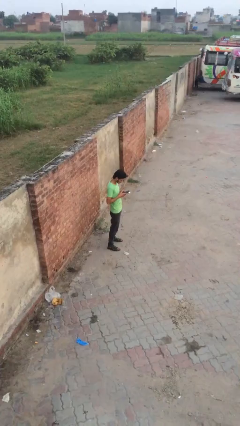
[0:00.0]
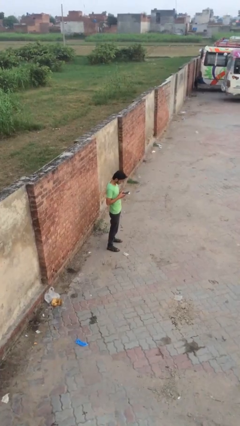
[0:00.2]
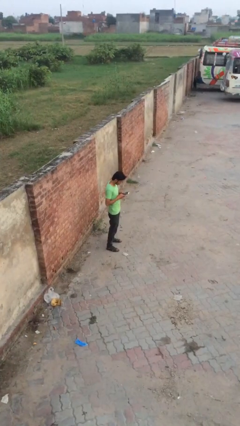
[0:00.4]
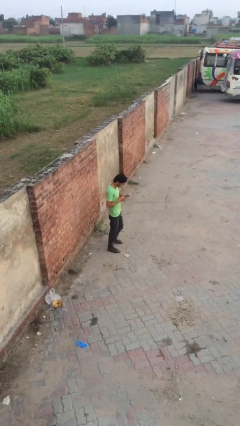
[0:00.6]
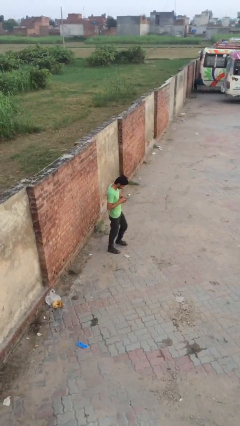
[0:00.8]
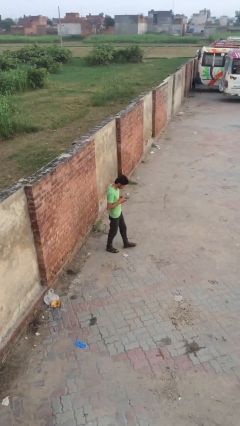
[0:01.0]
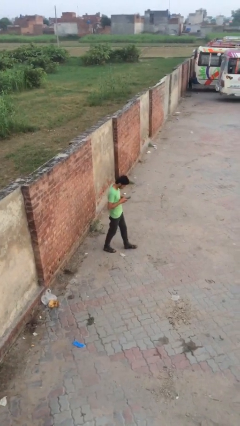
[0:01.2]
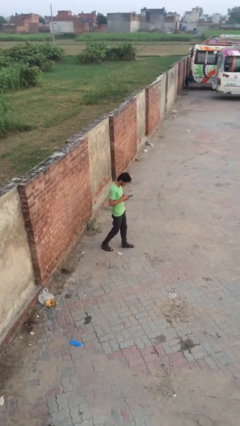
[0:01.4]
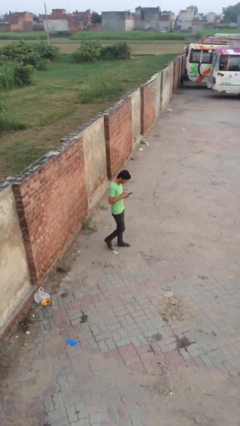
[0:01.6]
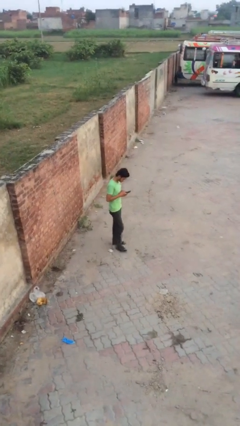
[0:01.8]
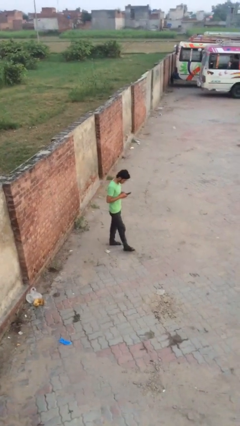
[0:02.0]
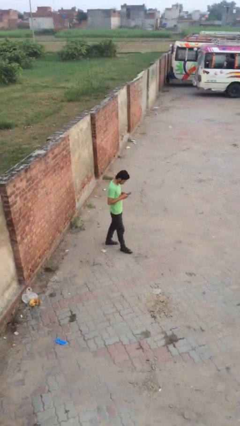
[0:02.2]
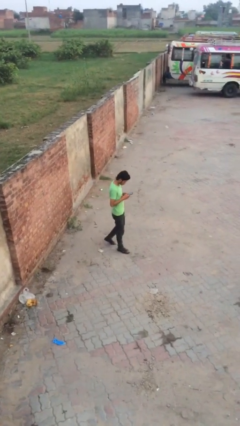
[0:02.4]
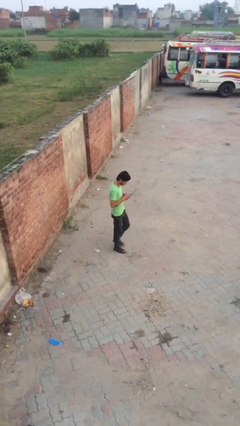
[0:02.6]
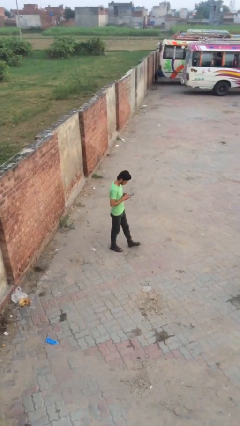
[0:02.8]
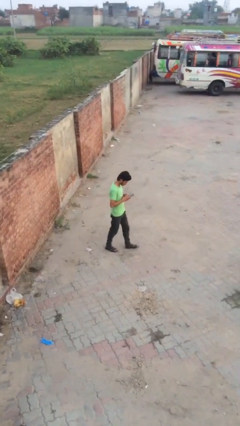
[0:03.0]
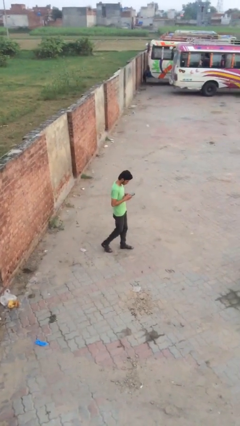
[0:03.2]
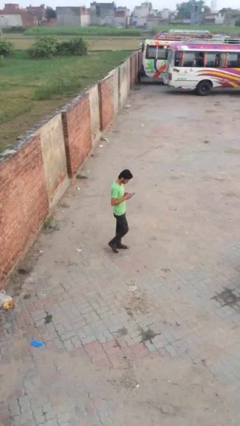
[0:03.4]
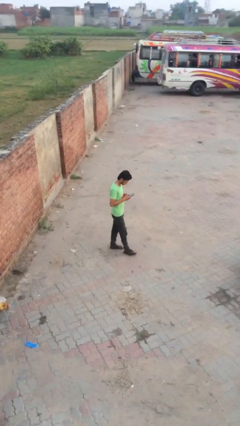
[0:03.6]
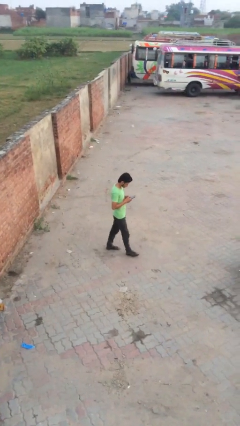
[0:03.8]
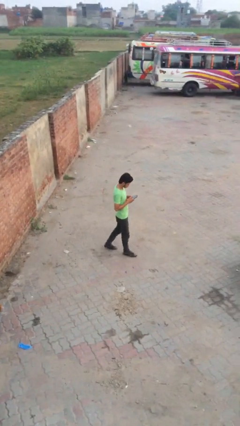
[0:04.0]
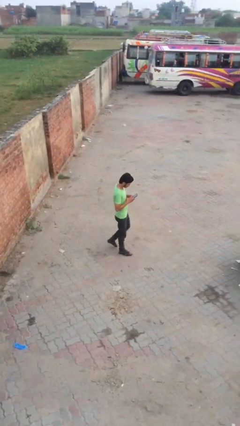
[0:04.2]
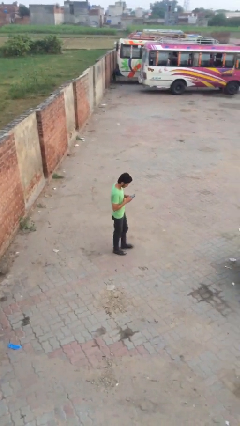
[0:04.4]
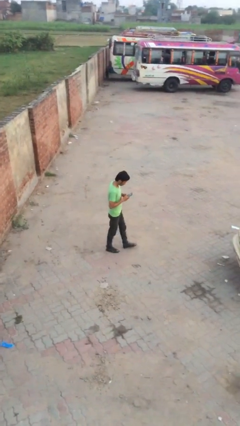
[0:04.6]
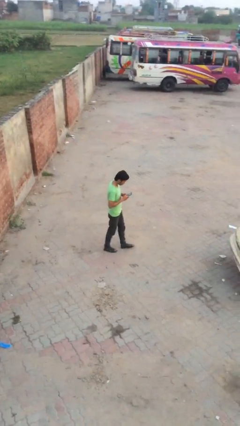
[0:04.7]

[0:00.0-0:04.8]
person texts on phone

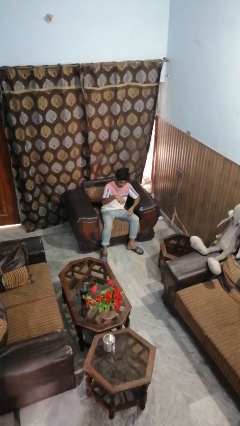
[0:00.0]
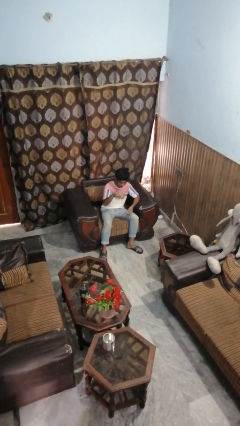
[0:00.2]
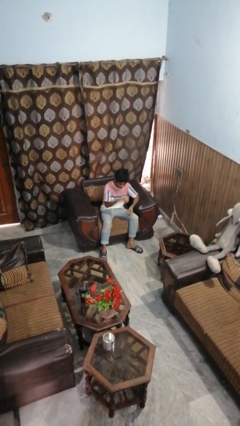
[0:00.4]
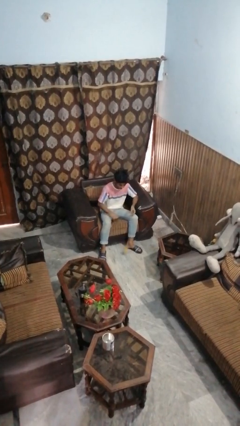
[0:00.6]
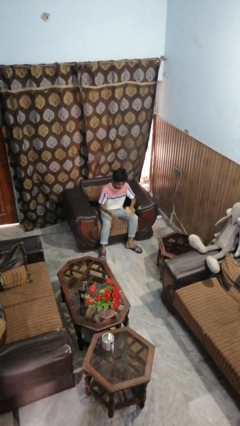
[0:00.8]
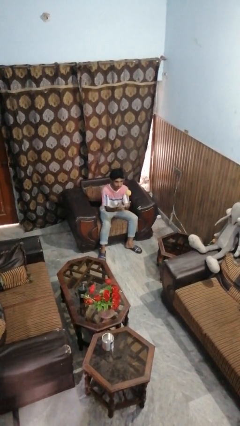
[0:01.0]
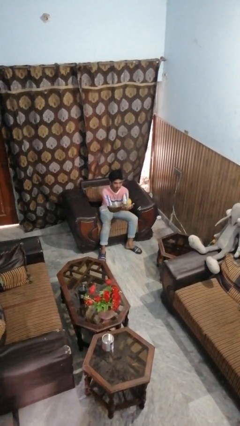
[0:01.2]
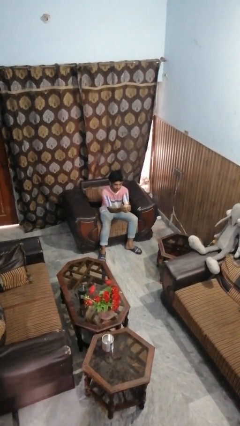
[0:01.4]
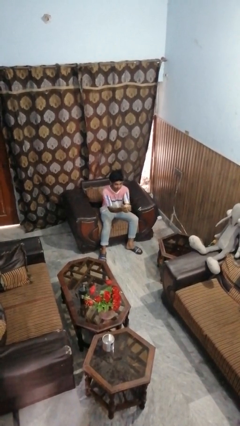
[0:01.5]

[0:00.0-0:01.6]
person bounces ball on floor

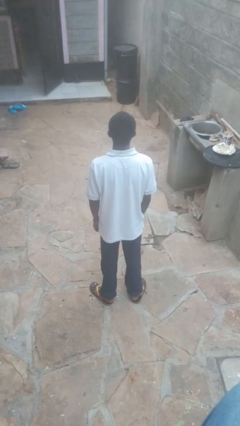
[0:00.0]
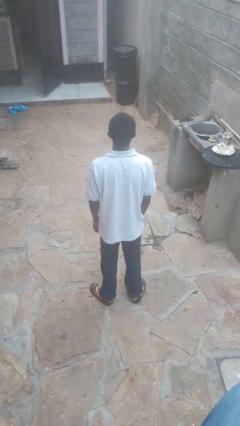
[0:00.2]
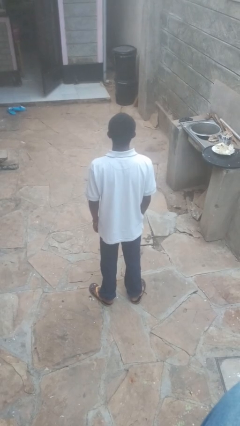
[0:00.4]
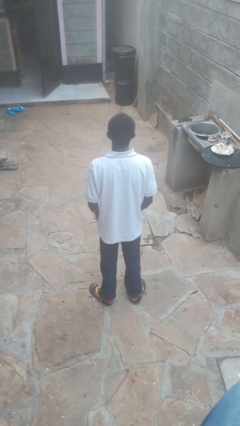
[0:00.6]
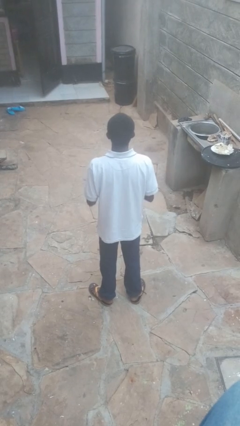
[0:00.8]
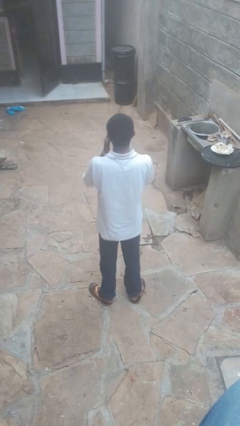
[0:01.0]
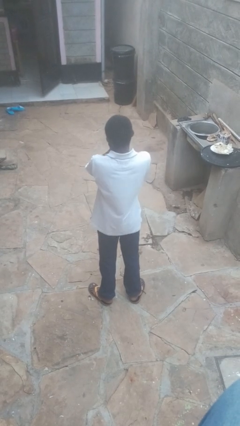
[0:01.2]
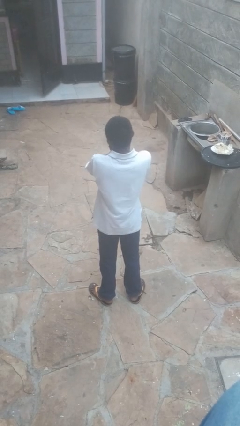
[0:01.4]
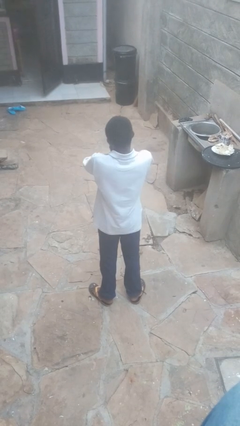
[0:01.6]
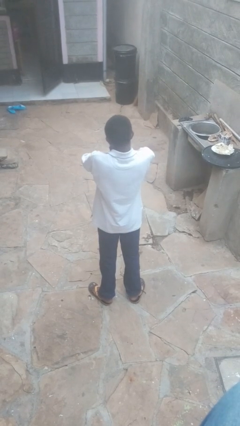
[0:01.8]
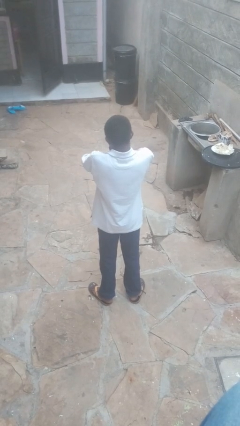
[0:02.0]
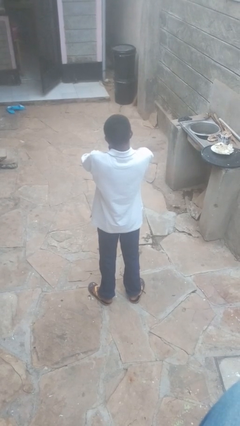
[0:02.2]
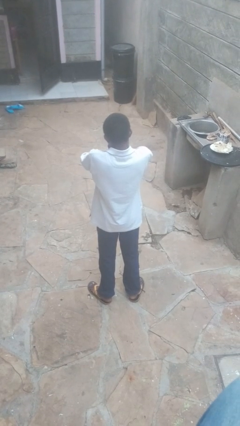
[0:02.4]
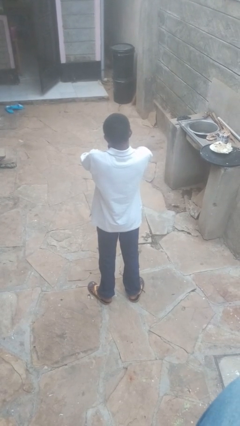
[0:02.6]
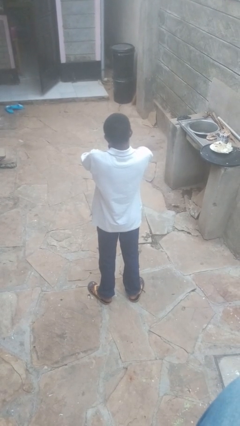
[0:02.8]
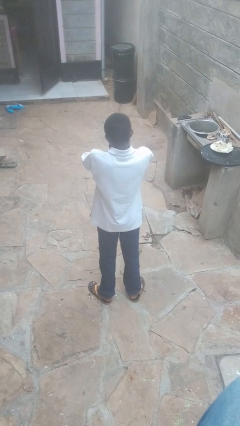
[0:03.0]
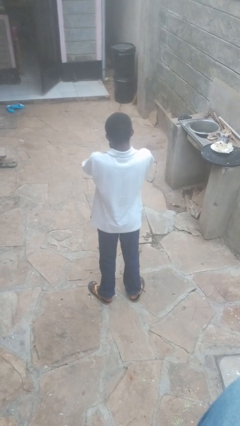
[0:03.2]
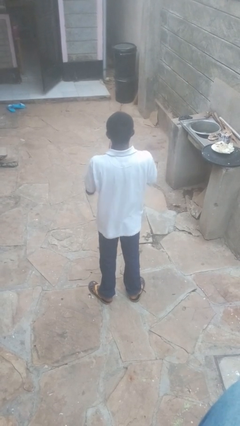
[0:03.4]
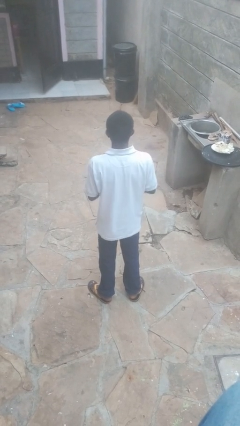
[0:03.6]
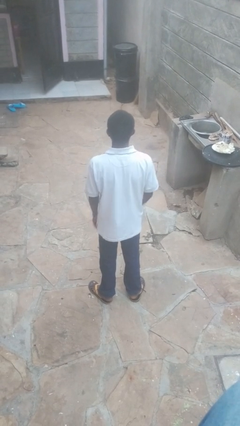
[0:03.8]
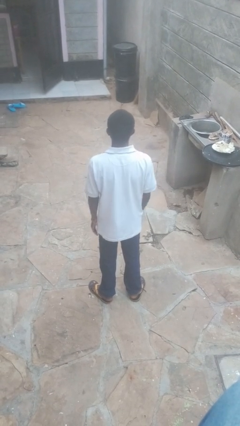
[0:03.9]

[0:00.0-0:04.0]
person covers face with hands

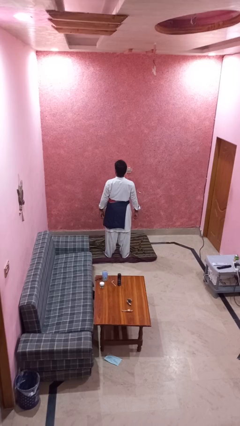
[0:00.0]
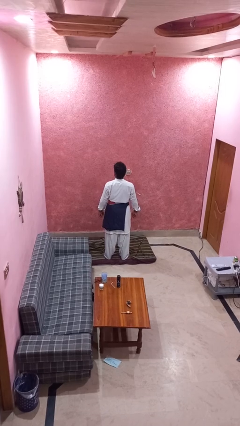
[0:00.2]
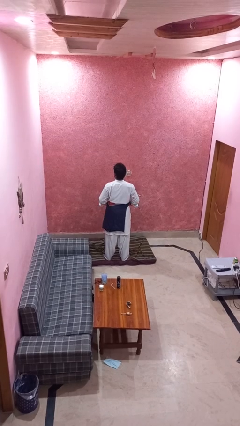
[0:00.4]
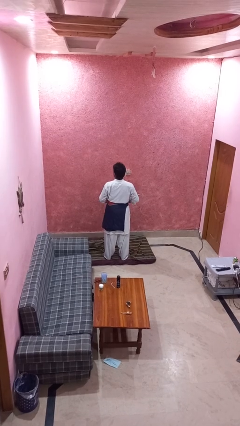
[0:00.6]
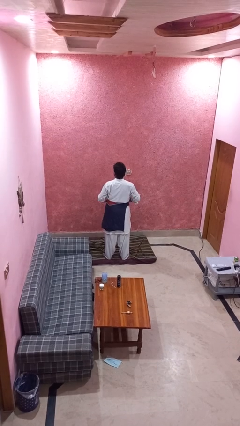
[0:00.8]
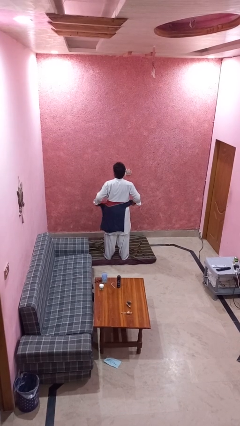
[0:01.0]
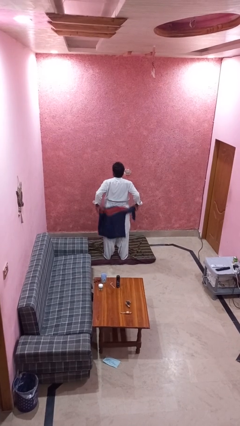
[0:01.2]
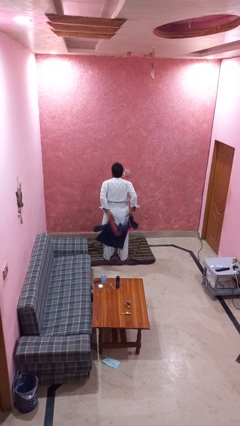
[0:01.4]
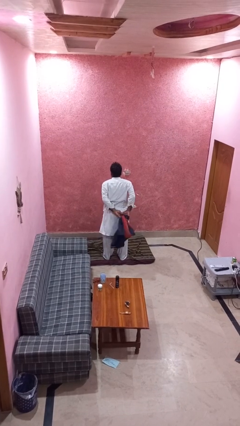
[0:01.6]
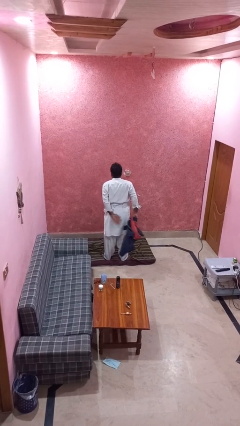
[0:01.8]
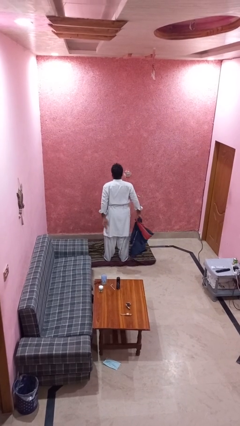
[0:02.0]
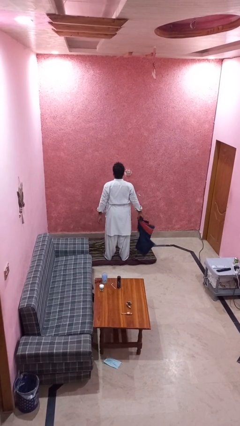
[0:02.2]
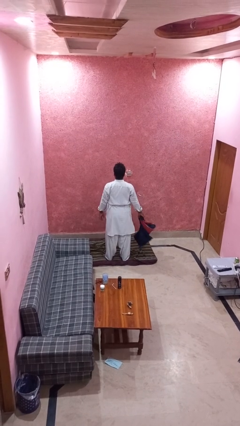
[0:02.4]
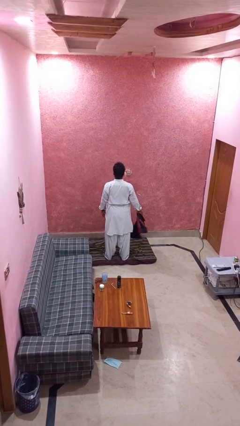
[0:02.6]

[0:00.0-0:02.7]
person unties jacket around waist

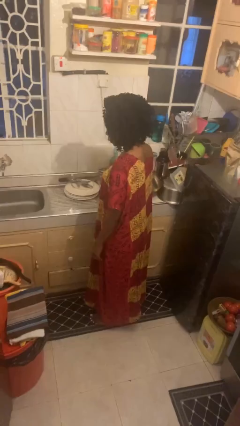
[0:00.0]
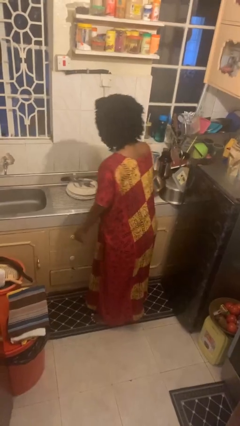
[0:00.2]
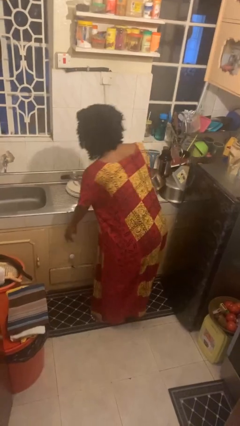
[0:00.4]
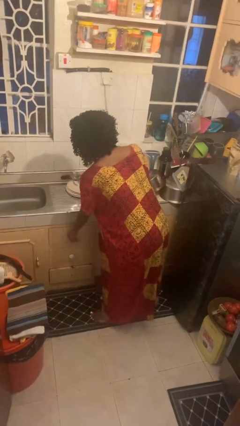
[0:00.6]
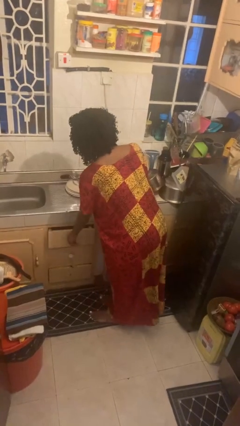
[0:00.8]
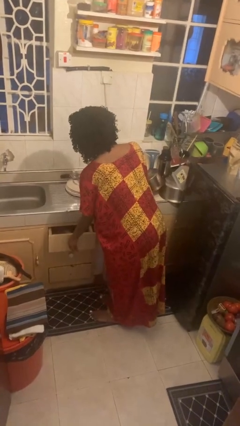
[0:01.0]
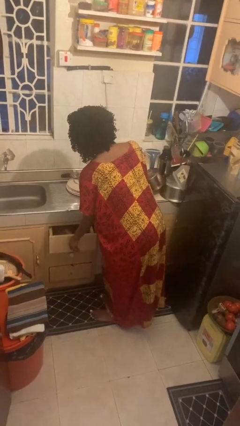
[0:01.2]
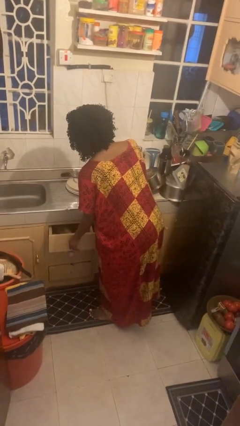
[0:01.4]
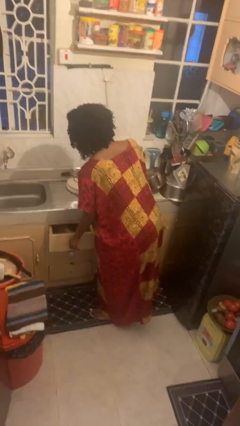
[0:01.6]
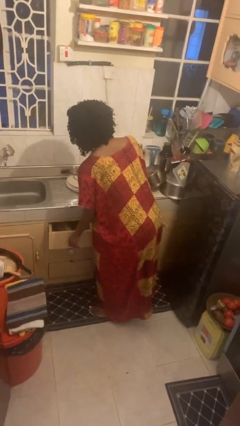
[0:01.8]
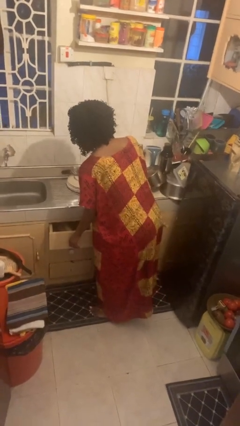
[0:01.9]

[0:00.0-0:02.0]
person opens kitchen drawer

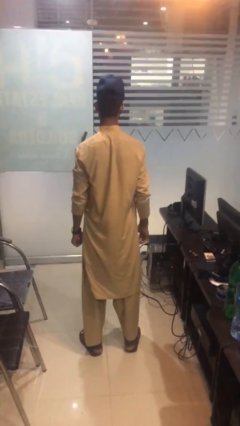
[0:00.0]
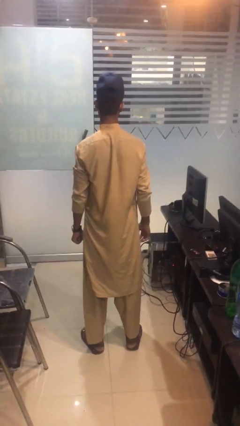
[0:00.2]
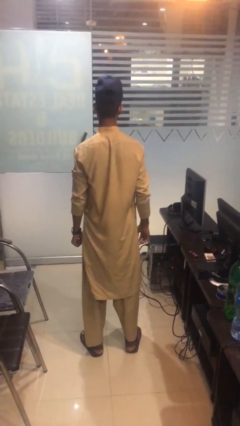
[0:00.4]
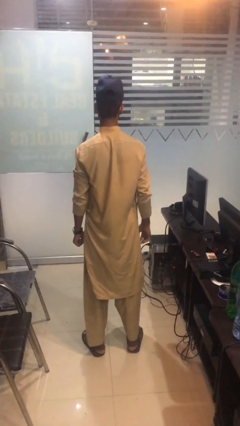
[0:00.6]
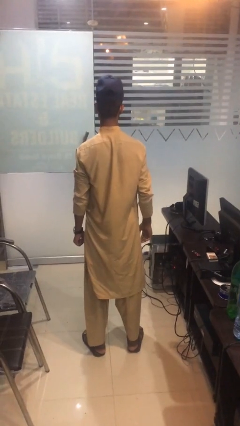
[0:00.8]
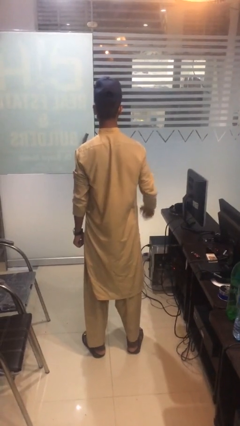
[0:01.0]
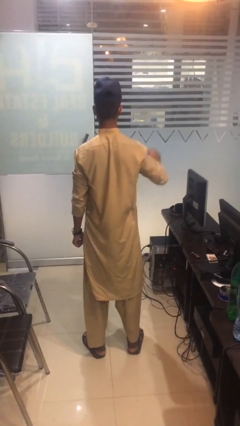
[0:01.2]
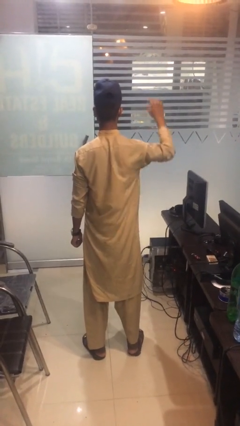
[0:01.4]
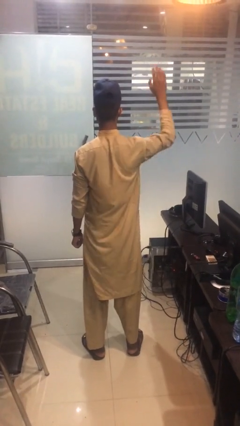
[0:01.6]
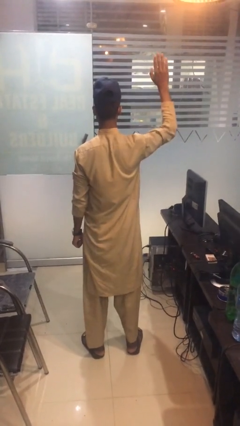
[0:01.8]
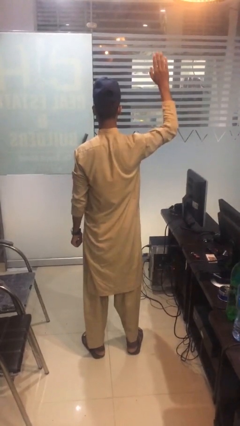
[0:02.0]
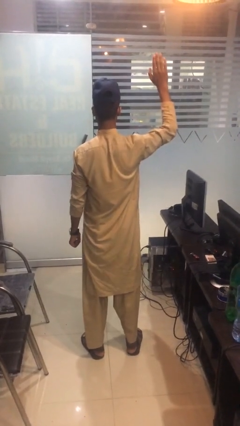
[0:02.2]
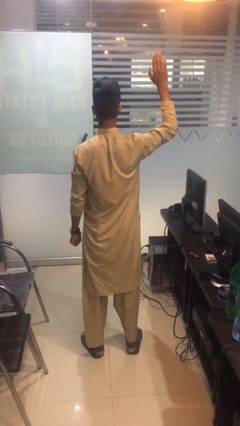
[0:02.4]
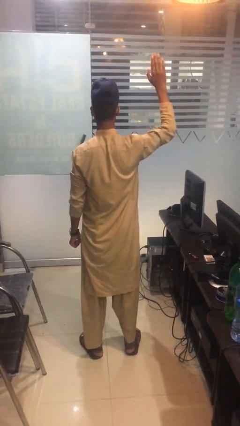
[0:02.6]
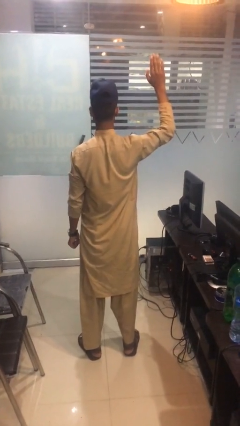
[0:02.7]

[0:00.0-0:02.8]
person gestures raise hand
